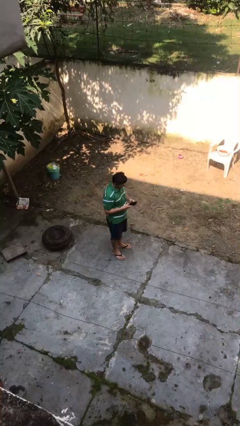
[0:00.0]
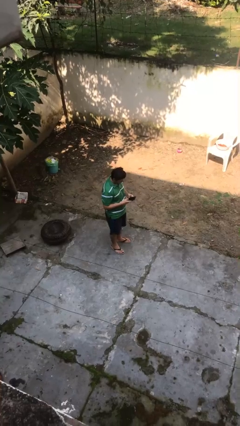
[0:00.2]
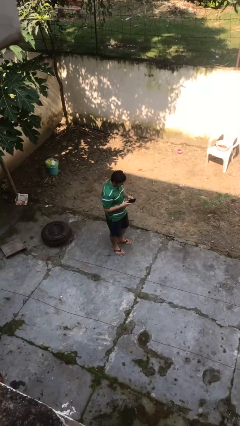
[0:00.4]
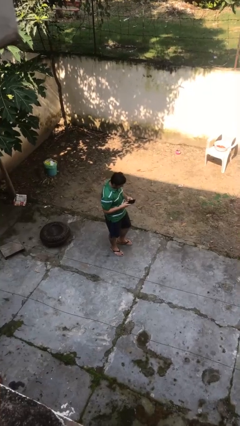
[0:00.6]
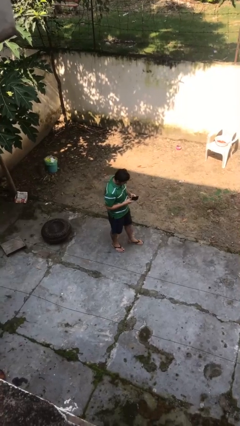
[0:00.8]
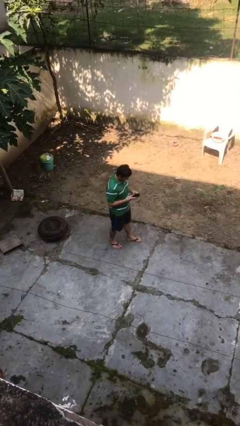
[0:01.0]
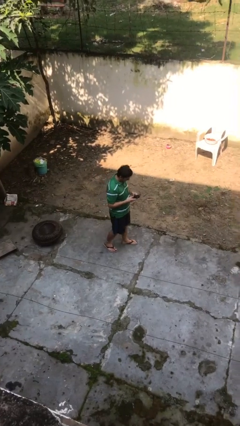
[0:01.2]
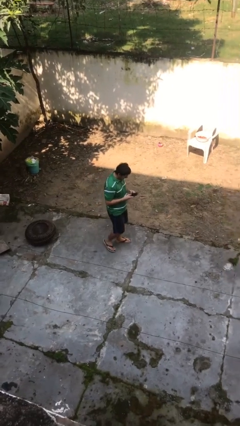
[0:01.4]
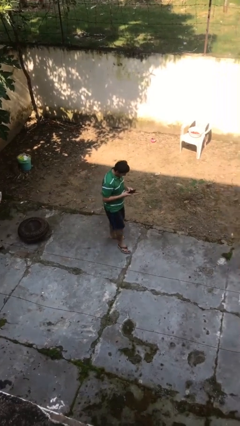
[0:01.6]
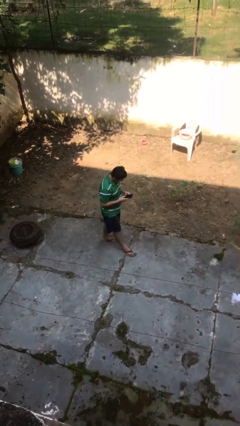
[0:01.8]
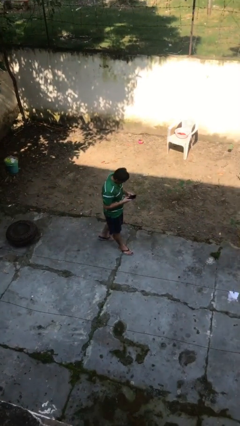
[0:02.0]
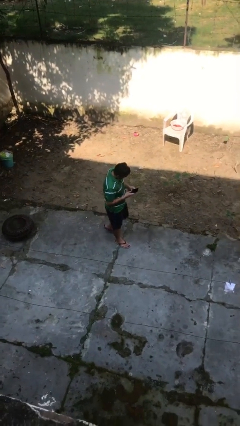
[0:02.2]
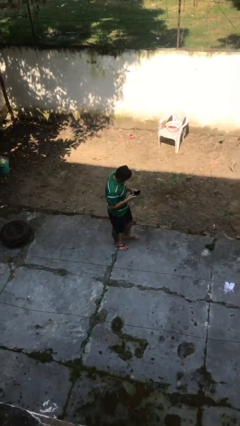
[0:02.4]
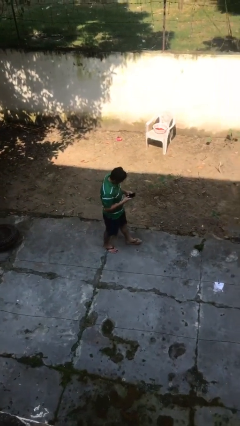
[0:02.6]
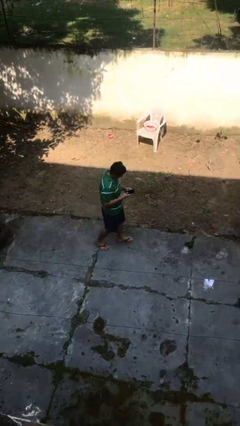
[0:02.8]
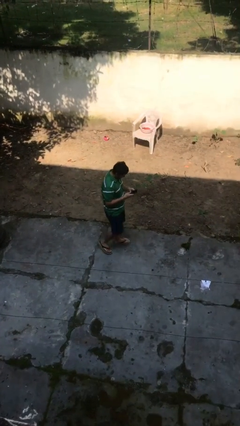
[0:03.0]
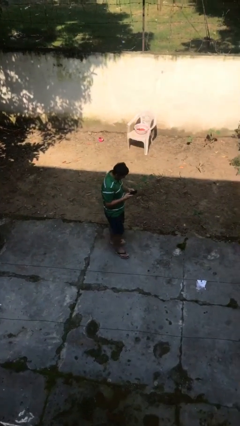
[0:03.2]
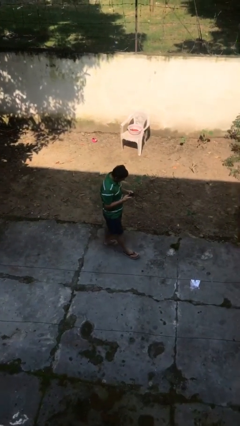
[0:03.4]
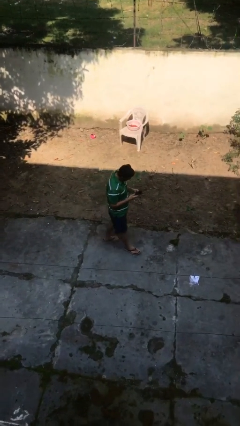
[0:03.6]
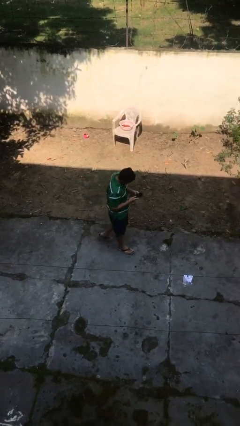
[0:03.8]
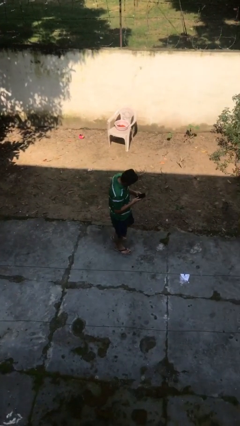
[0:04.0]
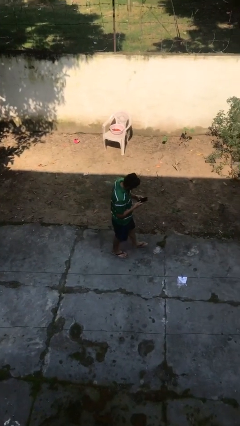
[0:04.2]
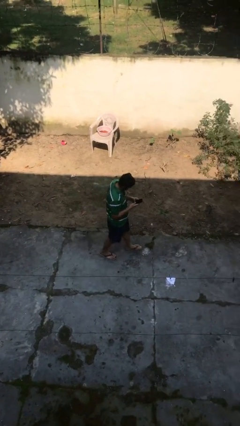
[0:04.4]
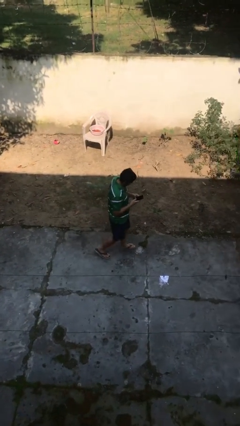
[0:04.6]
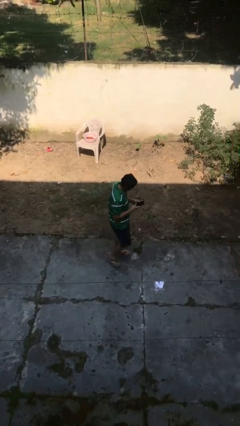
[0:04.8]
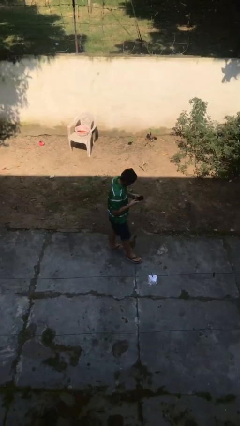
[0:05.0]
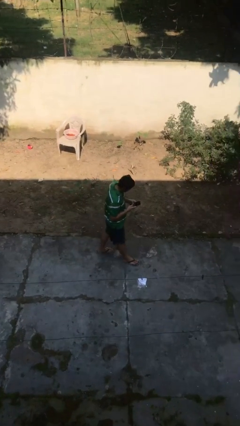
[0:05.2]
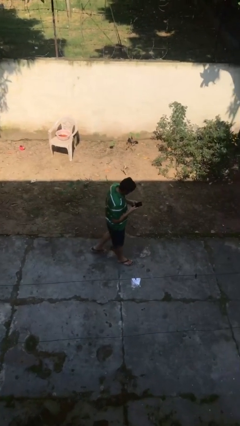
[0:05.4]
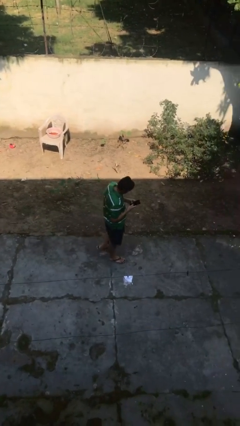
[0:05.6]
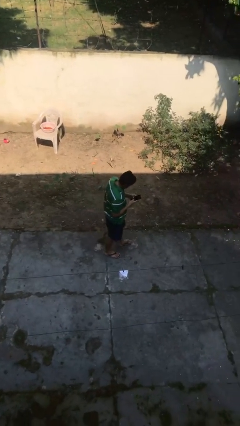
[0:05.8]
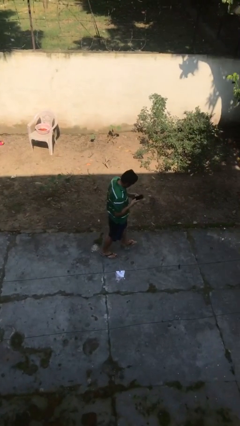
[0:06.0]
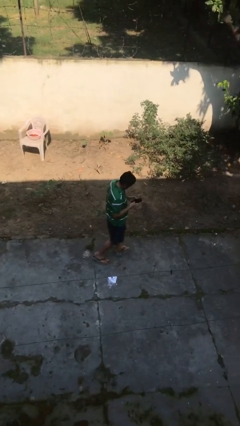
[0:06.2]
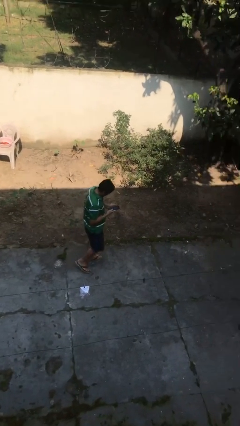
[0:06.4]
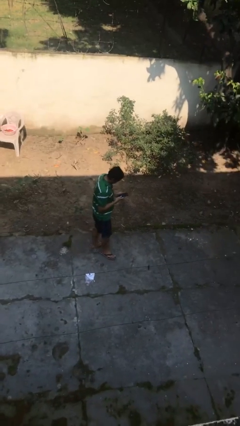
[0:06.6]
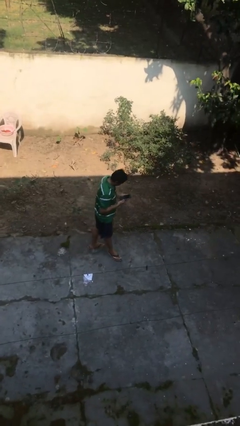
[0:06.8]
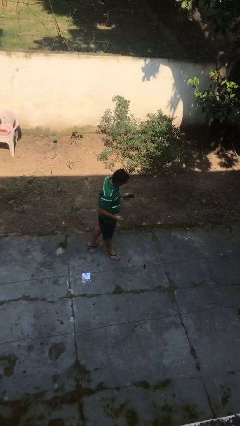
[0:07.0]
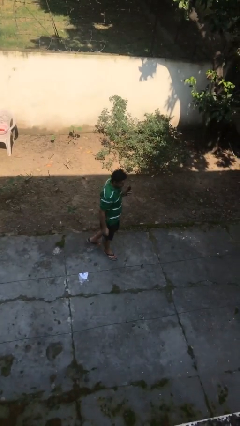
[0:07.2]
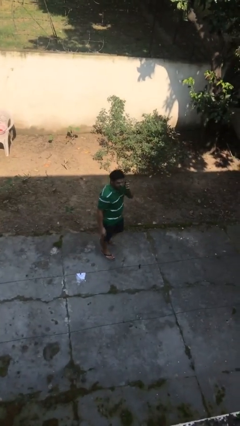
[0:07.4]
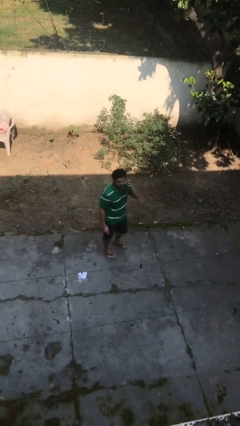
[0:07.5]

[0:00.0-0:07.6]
person texts on phone

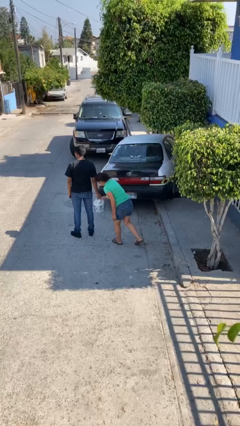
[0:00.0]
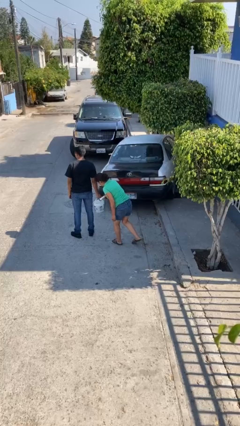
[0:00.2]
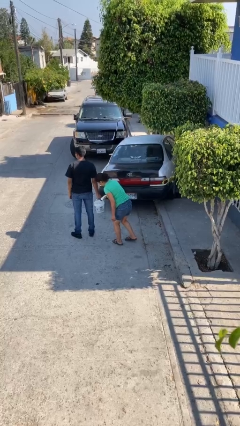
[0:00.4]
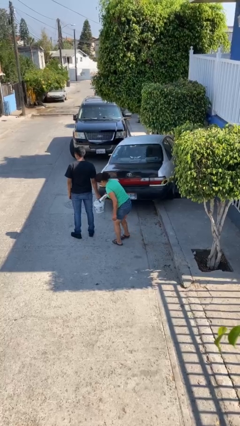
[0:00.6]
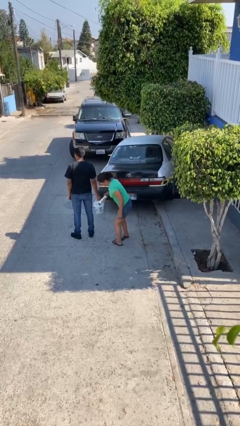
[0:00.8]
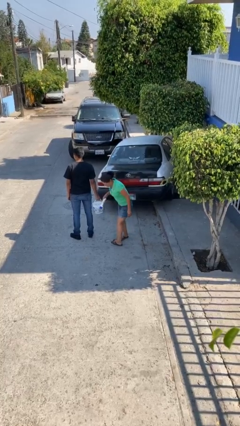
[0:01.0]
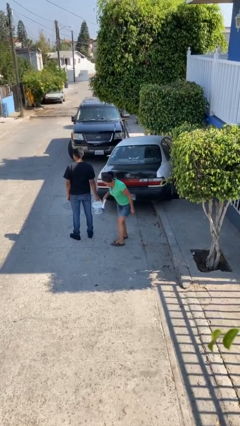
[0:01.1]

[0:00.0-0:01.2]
person steals object from person

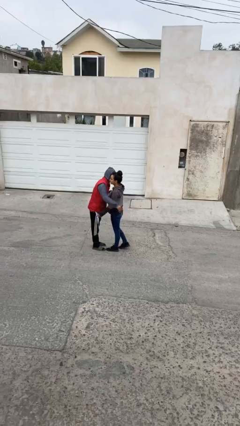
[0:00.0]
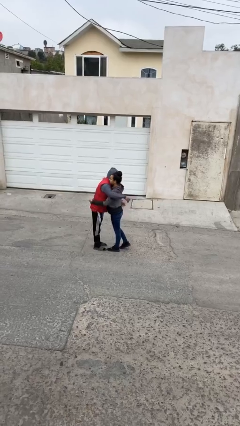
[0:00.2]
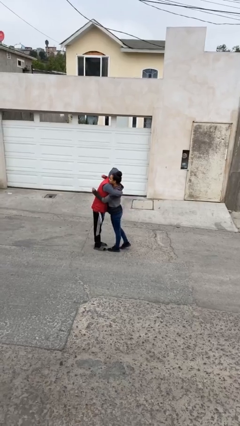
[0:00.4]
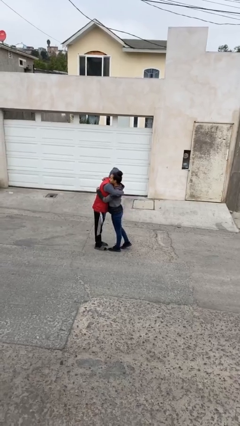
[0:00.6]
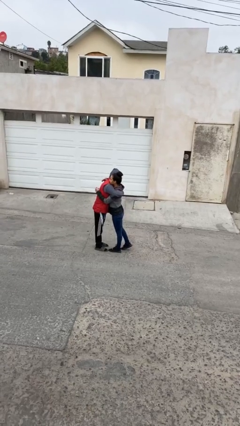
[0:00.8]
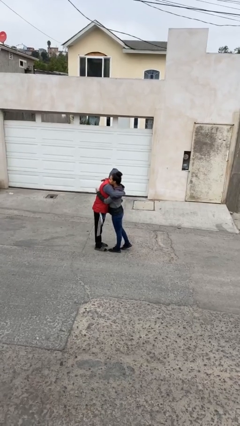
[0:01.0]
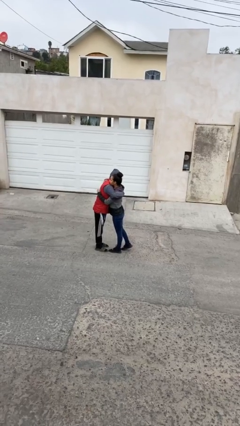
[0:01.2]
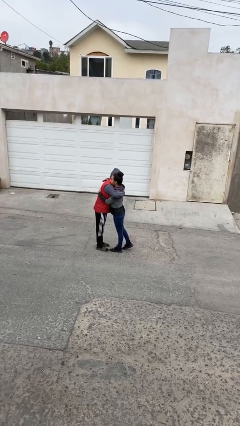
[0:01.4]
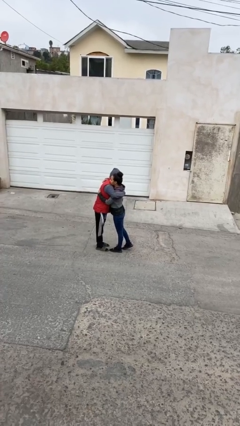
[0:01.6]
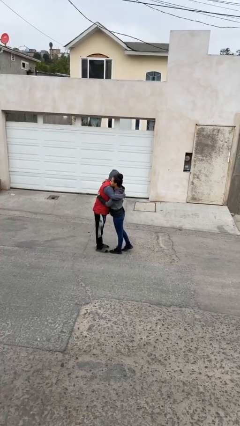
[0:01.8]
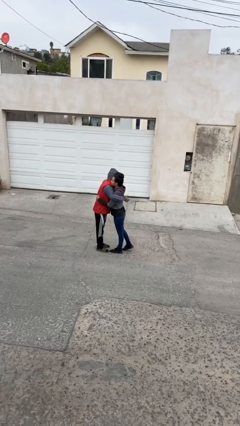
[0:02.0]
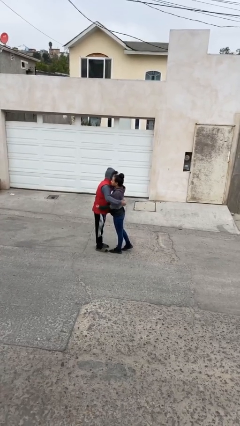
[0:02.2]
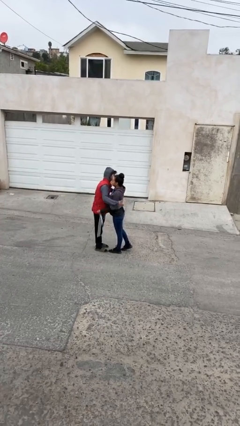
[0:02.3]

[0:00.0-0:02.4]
person embraces person

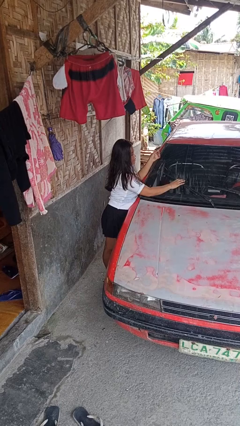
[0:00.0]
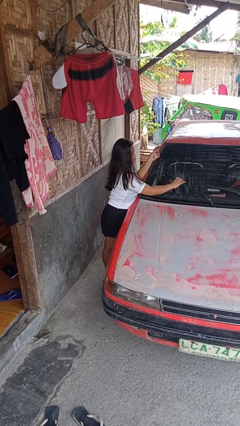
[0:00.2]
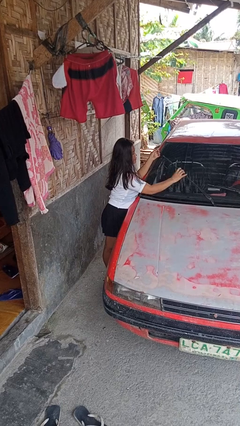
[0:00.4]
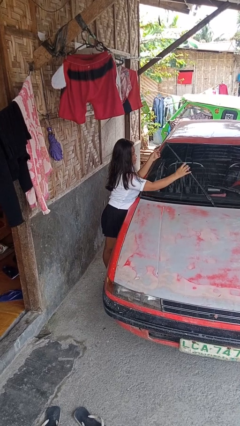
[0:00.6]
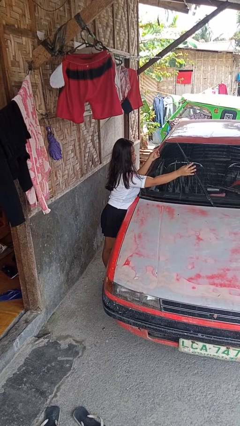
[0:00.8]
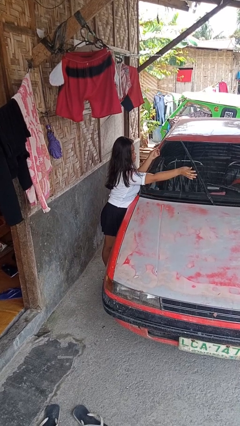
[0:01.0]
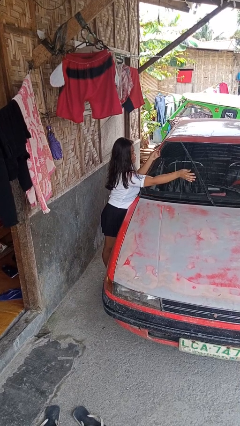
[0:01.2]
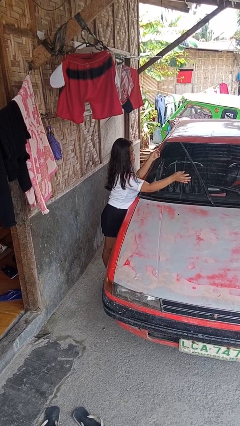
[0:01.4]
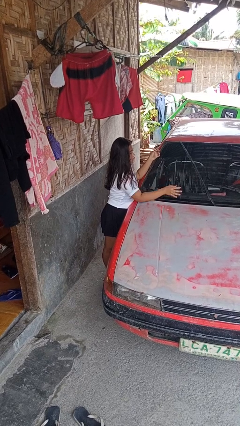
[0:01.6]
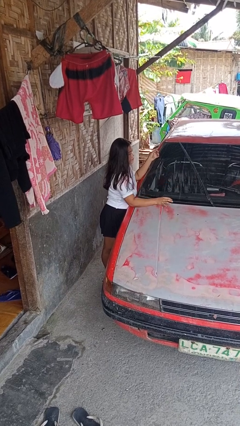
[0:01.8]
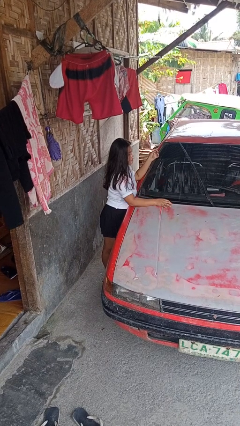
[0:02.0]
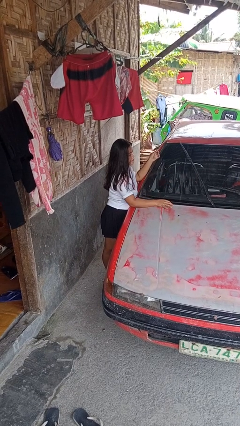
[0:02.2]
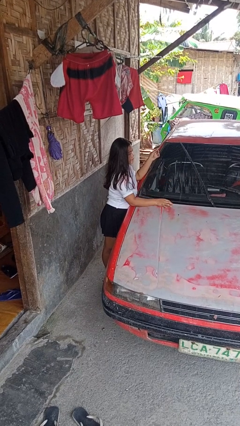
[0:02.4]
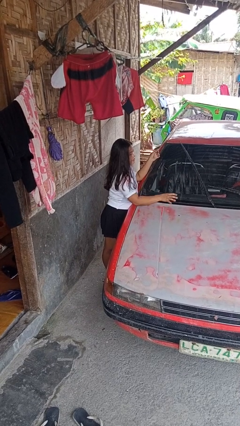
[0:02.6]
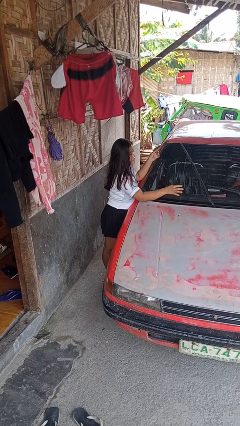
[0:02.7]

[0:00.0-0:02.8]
person flips up car wipers

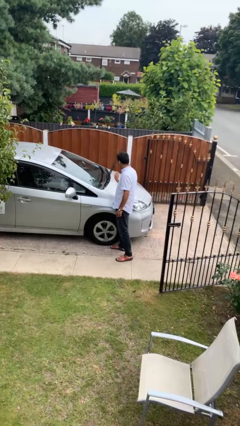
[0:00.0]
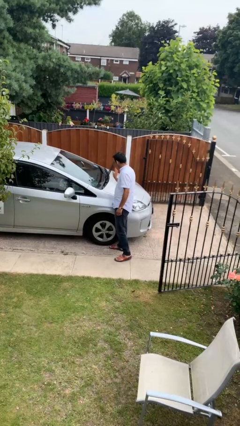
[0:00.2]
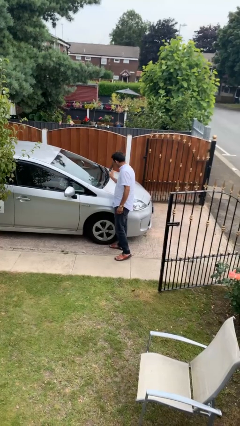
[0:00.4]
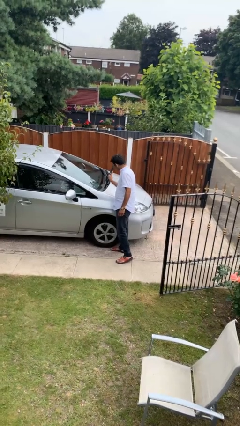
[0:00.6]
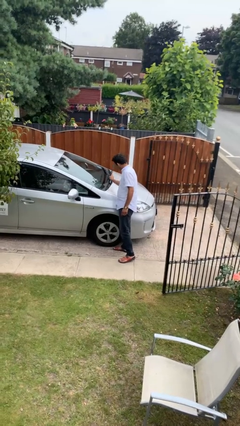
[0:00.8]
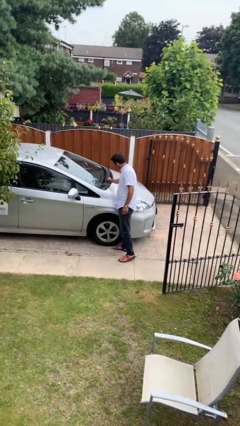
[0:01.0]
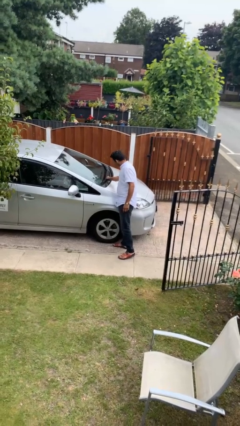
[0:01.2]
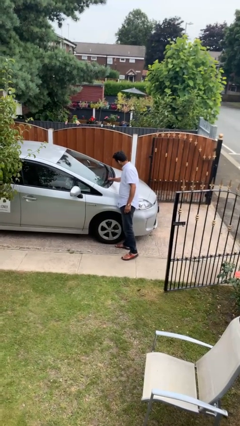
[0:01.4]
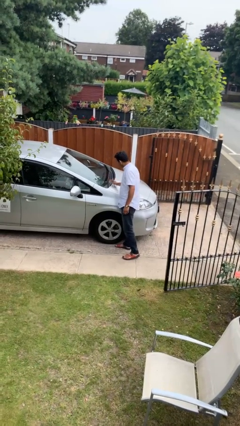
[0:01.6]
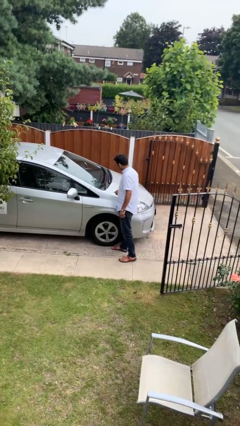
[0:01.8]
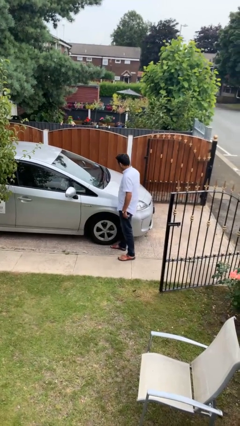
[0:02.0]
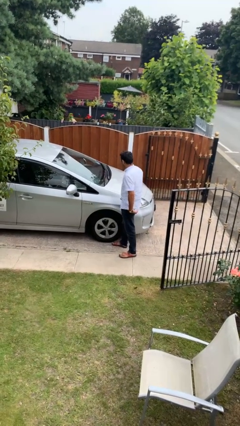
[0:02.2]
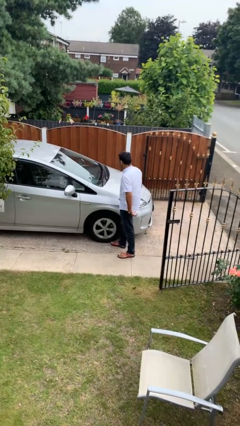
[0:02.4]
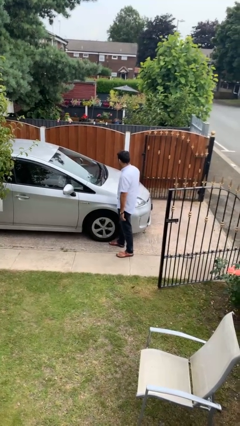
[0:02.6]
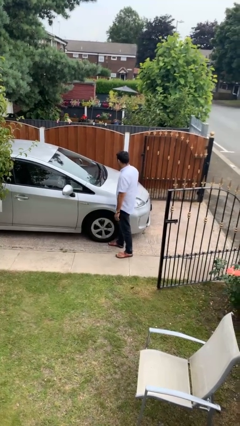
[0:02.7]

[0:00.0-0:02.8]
person flips down car wipers

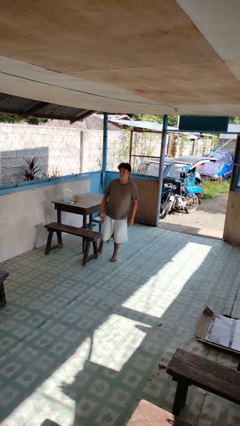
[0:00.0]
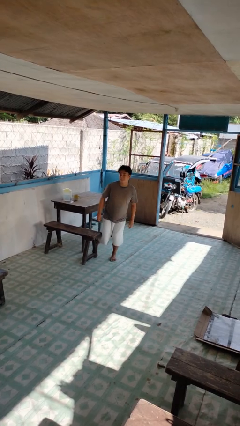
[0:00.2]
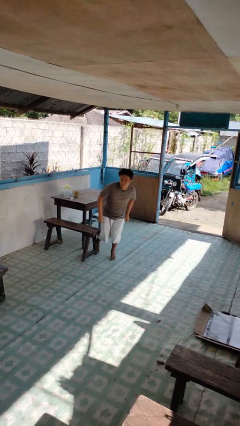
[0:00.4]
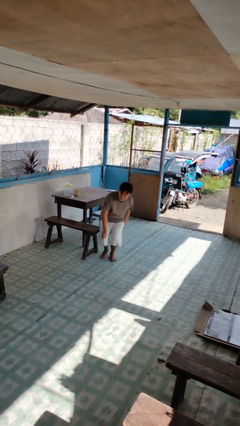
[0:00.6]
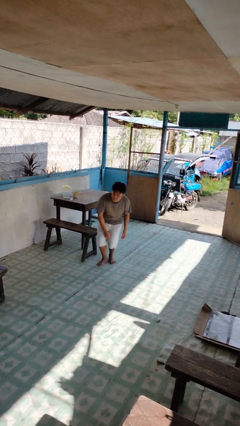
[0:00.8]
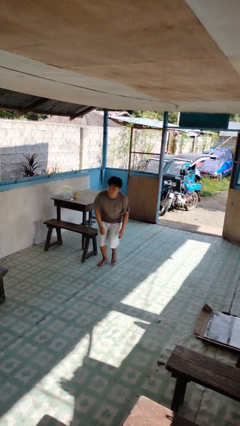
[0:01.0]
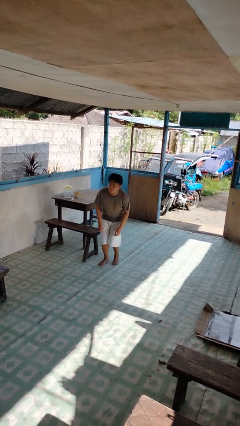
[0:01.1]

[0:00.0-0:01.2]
person stubs toe
